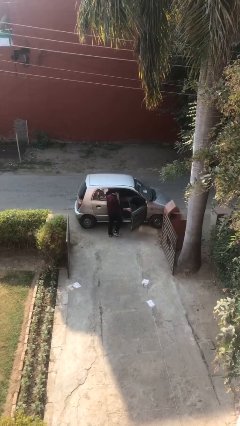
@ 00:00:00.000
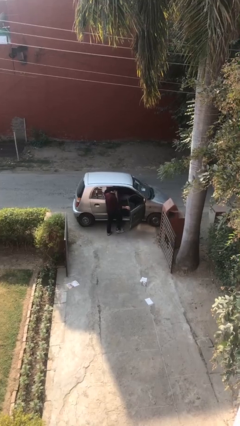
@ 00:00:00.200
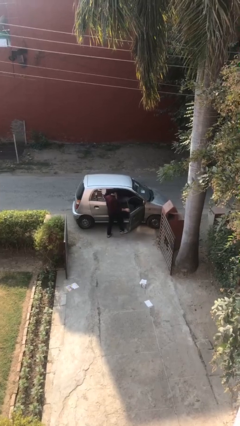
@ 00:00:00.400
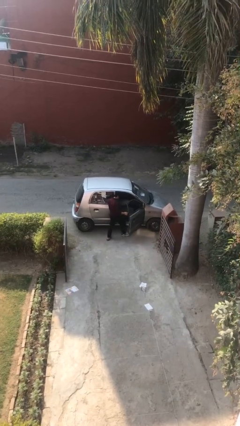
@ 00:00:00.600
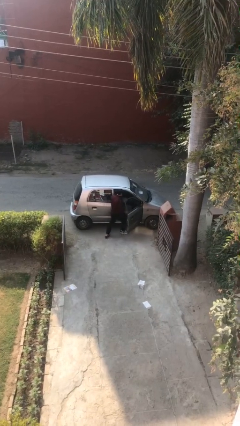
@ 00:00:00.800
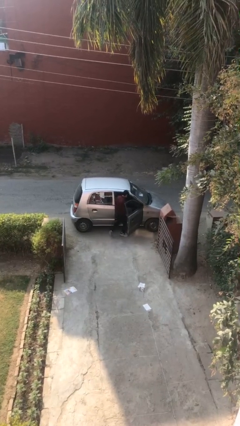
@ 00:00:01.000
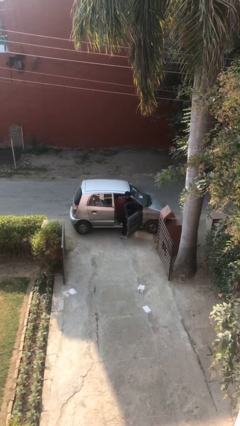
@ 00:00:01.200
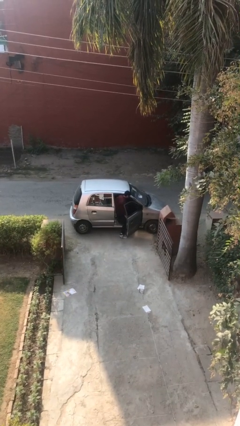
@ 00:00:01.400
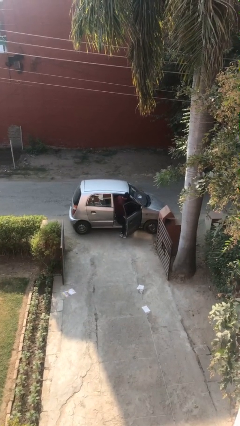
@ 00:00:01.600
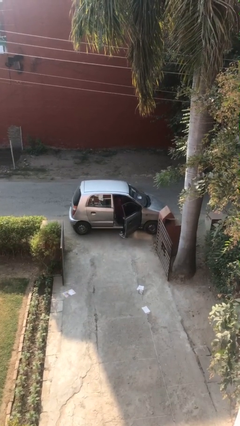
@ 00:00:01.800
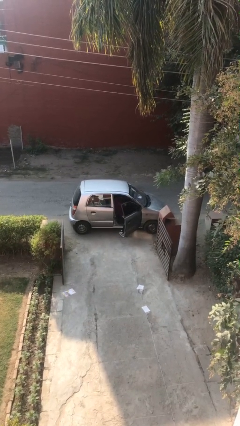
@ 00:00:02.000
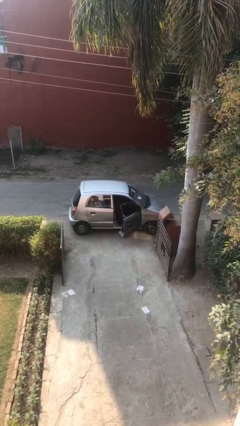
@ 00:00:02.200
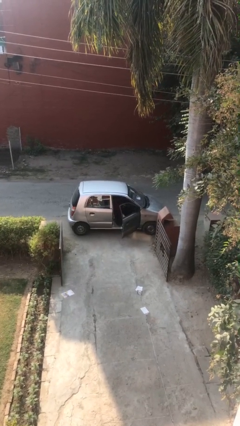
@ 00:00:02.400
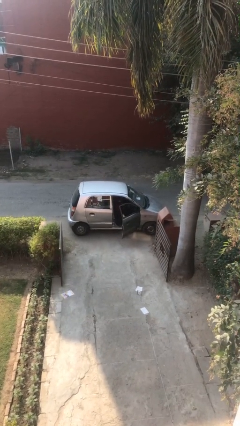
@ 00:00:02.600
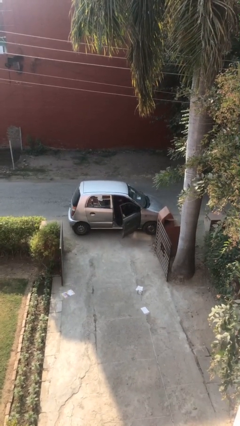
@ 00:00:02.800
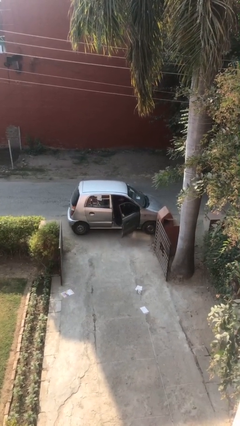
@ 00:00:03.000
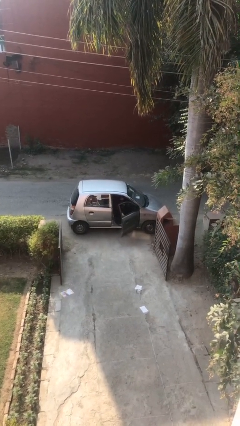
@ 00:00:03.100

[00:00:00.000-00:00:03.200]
person enters car

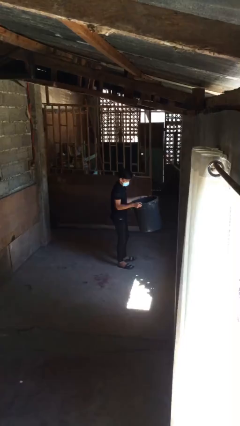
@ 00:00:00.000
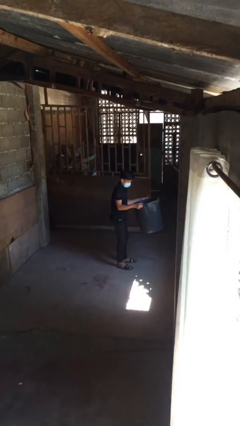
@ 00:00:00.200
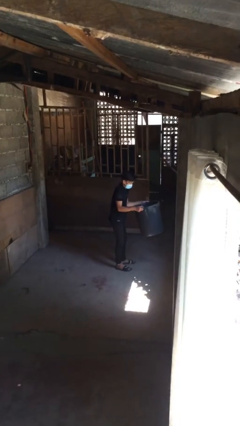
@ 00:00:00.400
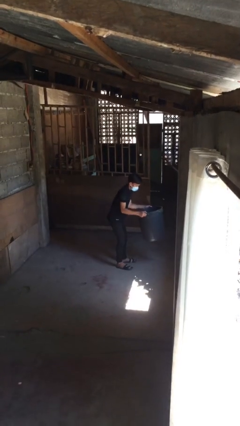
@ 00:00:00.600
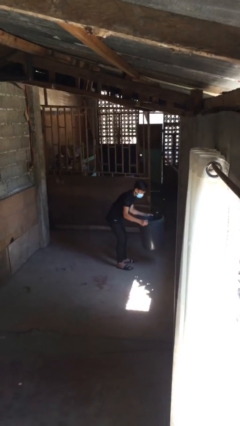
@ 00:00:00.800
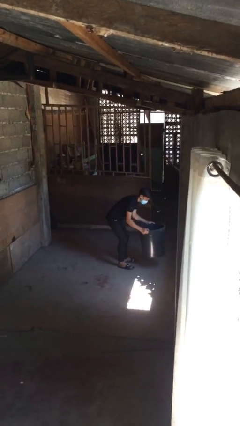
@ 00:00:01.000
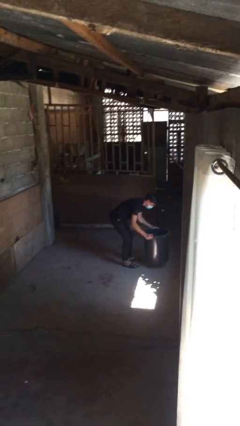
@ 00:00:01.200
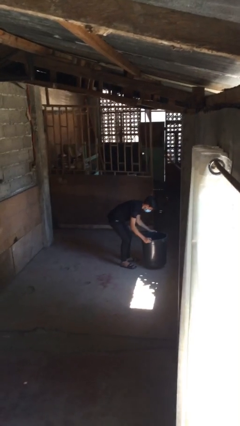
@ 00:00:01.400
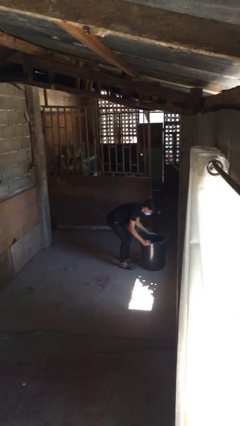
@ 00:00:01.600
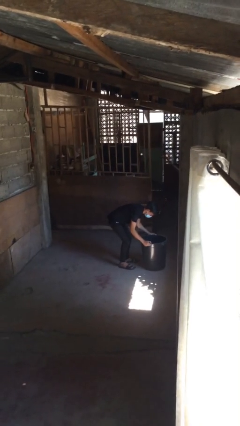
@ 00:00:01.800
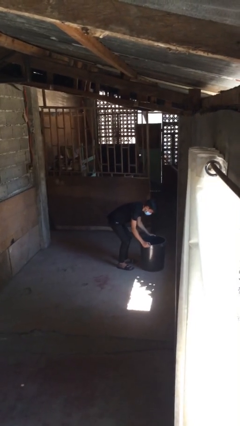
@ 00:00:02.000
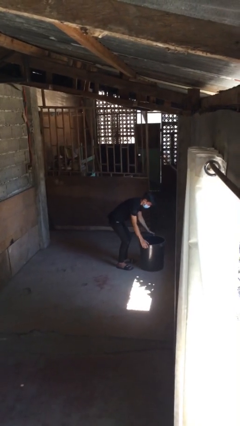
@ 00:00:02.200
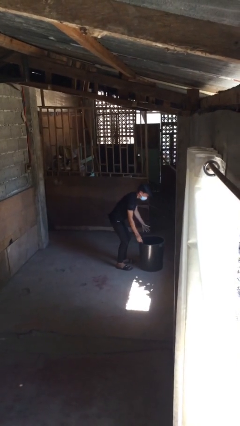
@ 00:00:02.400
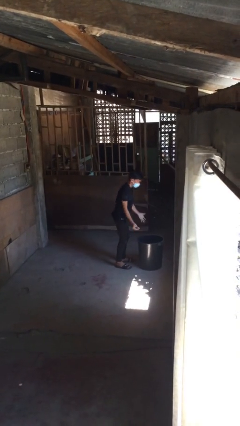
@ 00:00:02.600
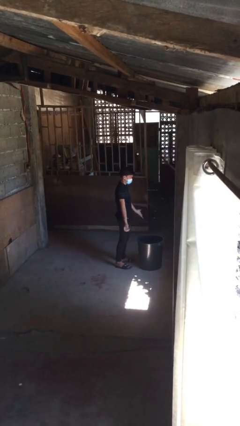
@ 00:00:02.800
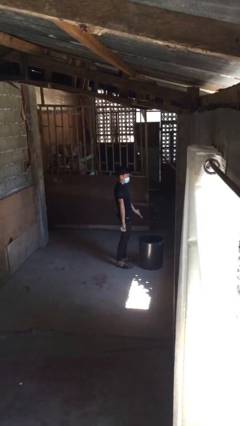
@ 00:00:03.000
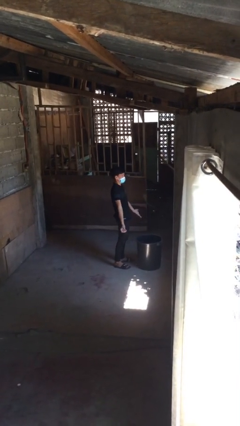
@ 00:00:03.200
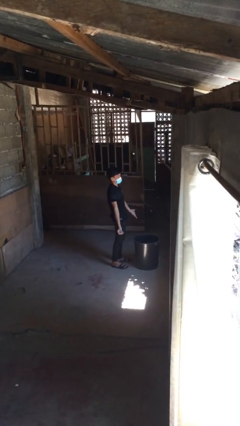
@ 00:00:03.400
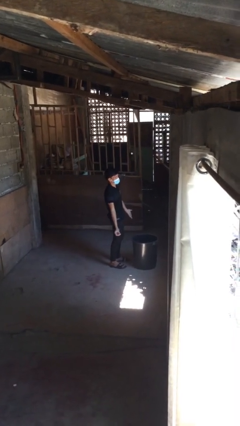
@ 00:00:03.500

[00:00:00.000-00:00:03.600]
person puts down object on floor

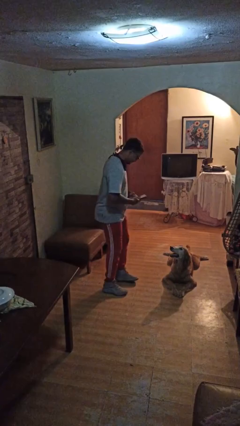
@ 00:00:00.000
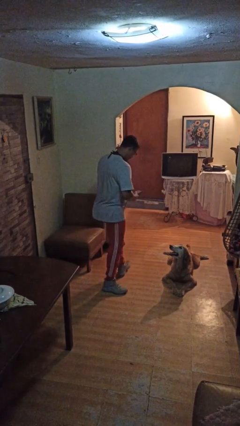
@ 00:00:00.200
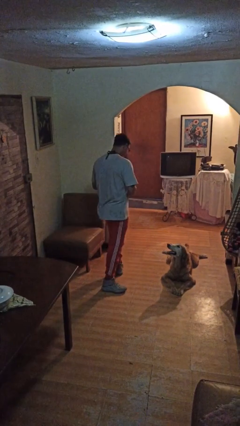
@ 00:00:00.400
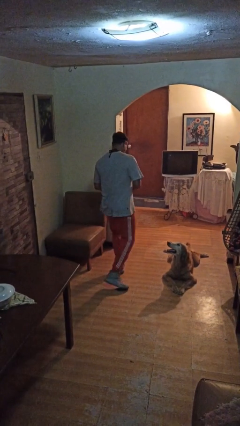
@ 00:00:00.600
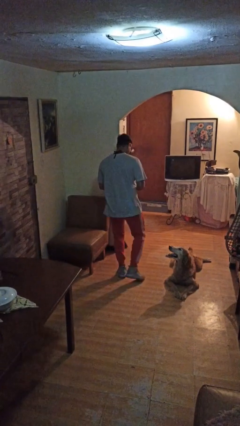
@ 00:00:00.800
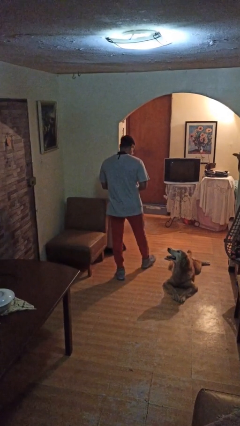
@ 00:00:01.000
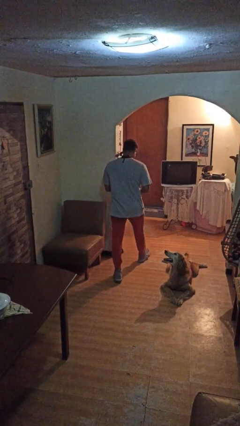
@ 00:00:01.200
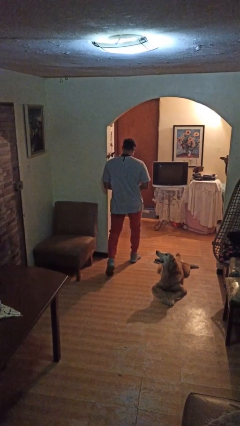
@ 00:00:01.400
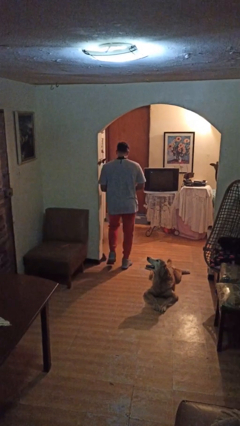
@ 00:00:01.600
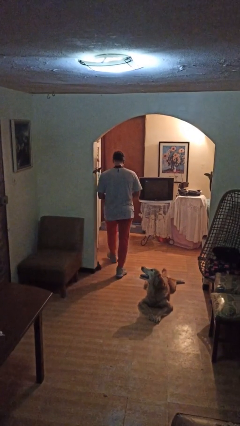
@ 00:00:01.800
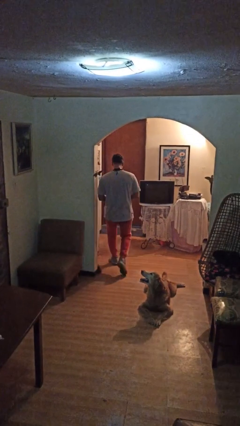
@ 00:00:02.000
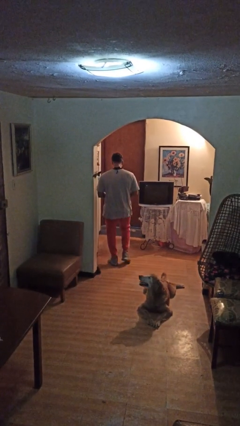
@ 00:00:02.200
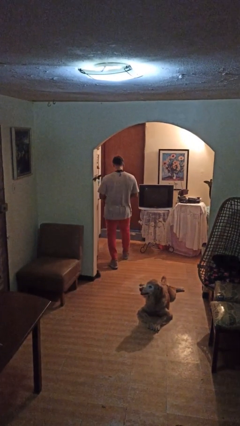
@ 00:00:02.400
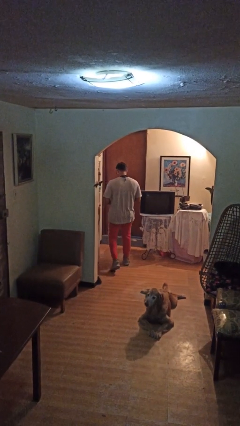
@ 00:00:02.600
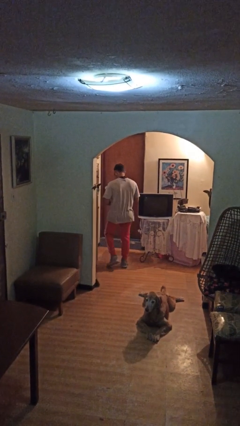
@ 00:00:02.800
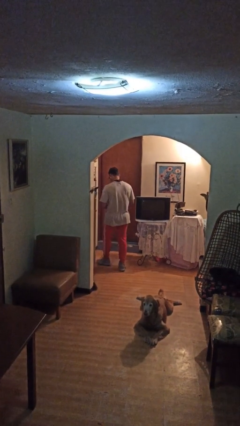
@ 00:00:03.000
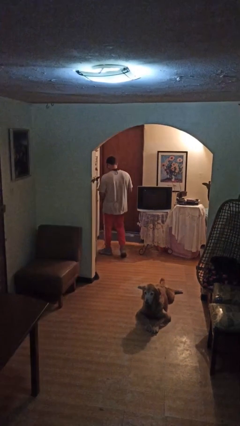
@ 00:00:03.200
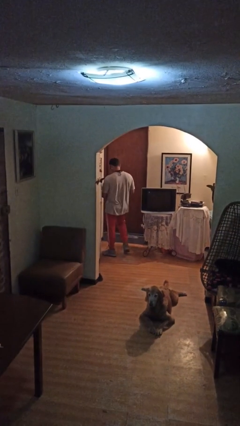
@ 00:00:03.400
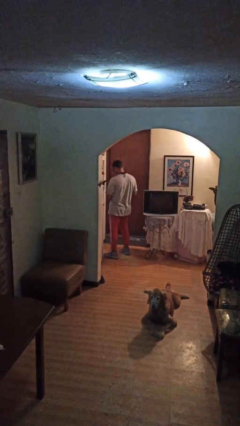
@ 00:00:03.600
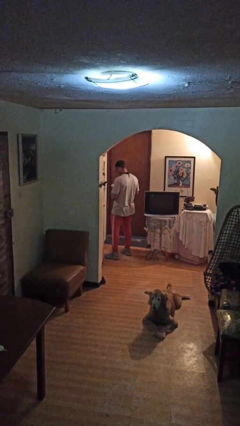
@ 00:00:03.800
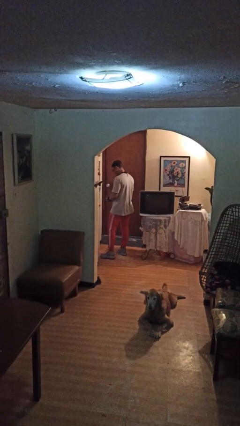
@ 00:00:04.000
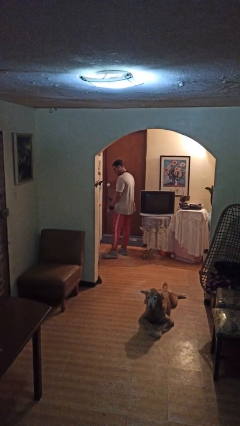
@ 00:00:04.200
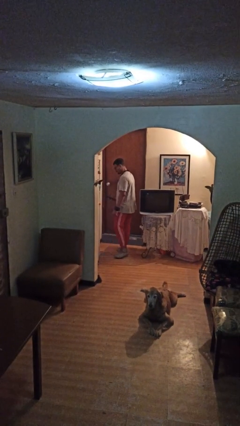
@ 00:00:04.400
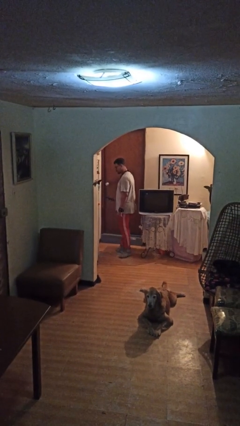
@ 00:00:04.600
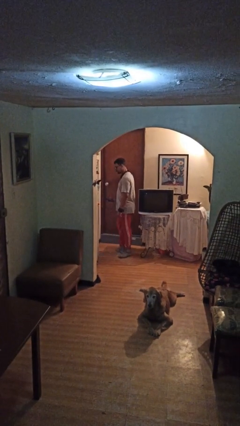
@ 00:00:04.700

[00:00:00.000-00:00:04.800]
person exits scene through structure

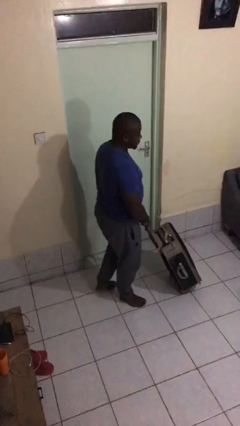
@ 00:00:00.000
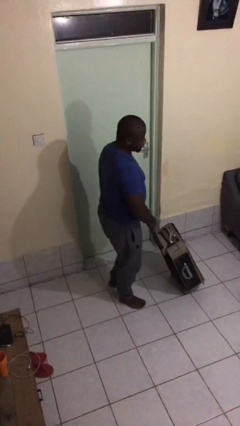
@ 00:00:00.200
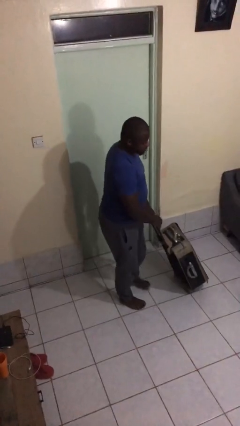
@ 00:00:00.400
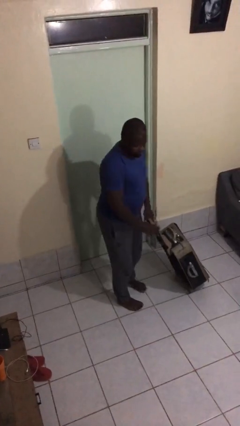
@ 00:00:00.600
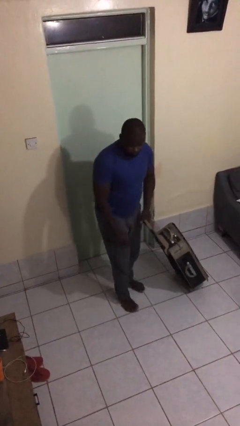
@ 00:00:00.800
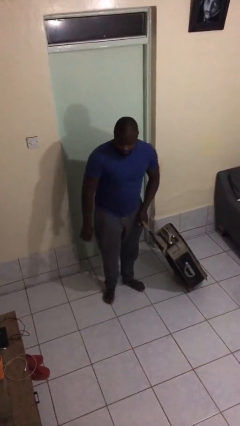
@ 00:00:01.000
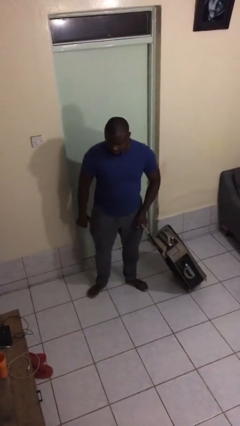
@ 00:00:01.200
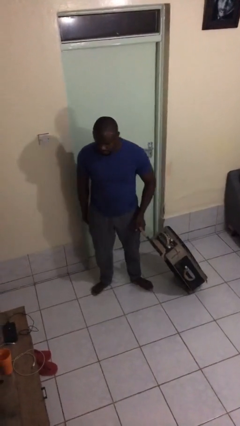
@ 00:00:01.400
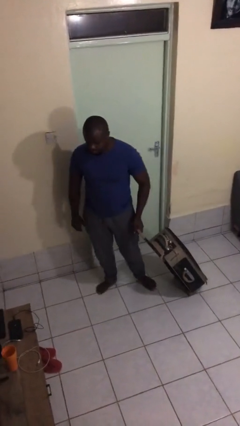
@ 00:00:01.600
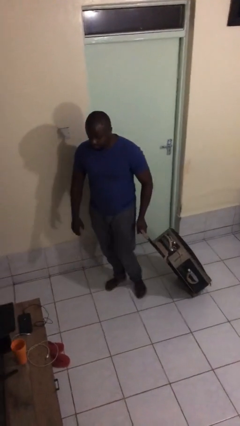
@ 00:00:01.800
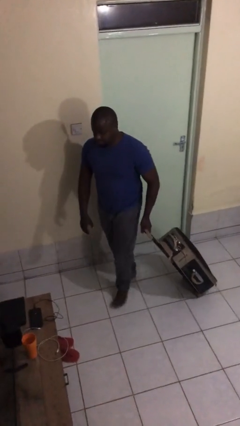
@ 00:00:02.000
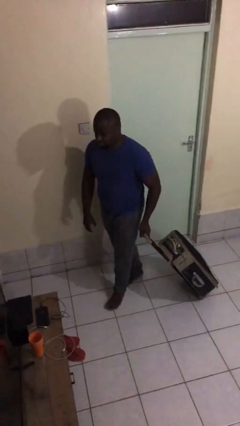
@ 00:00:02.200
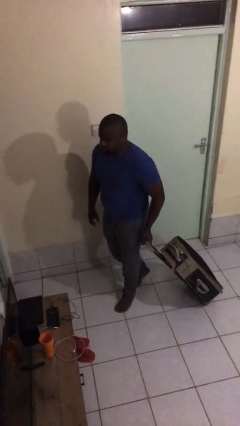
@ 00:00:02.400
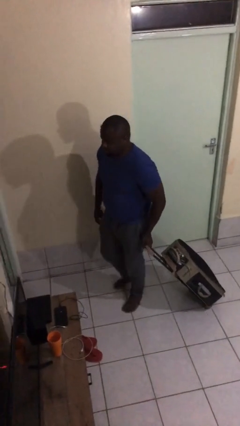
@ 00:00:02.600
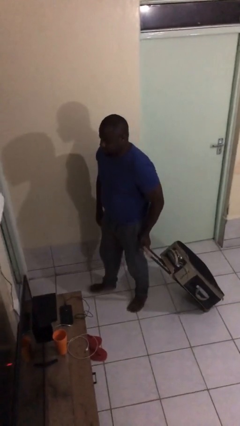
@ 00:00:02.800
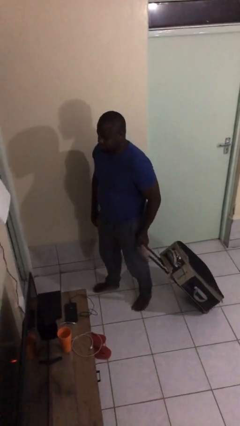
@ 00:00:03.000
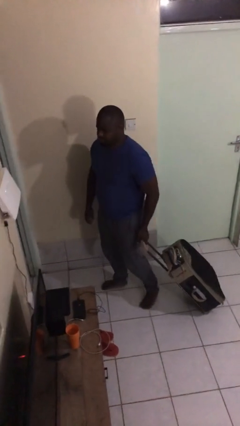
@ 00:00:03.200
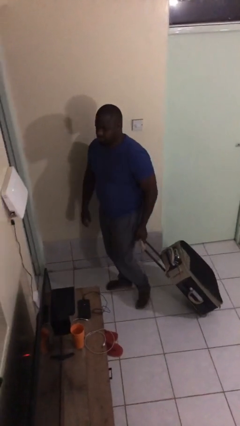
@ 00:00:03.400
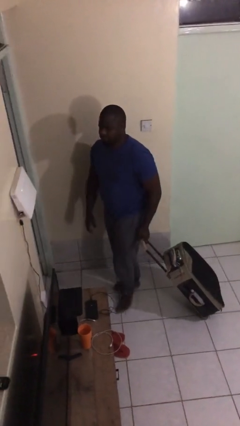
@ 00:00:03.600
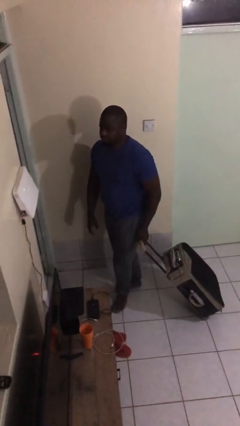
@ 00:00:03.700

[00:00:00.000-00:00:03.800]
person pulls wheeled cart

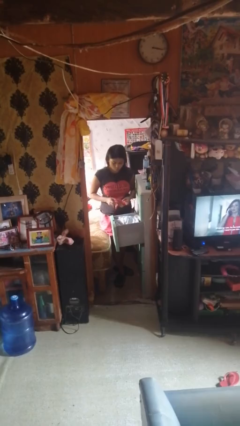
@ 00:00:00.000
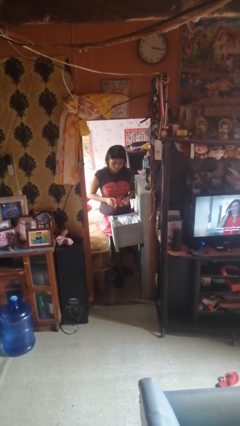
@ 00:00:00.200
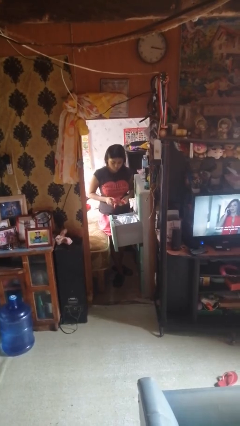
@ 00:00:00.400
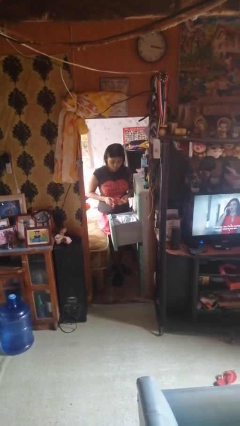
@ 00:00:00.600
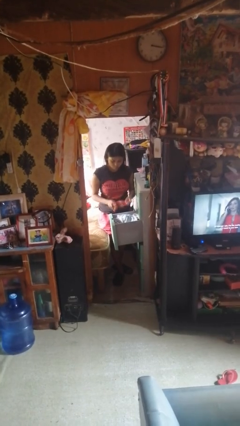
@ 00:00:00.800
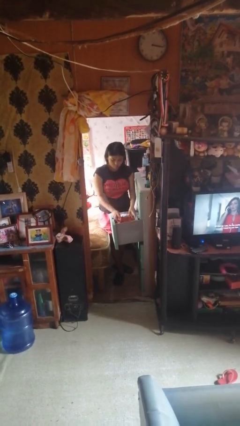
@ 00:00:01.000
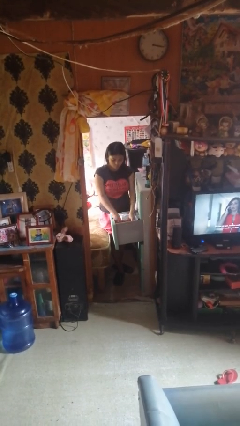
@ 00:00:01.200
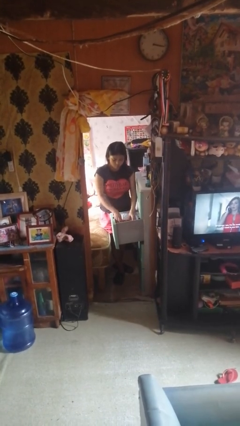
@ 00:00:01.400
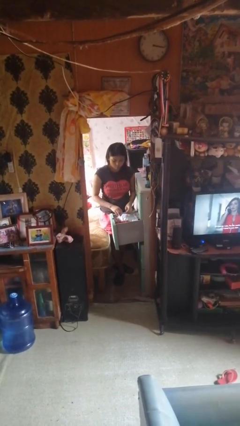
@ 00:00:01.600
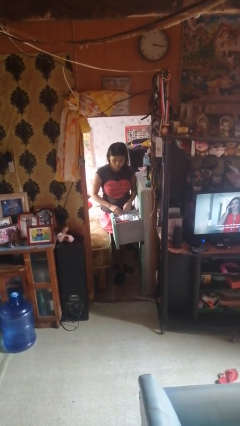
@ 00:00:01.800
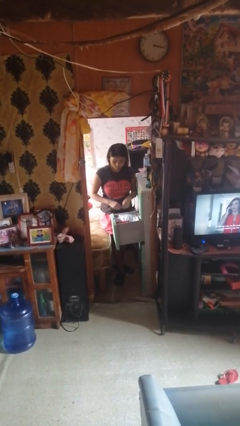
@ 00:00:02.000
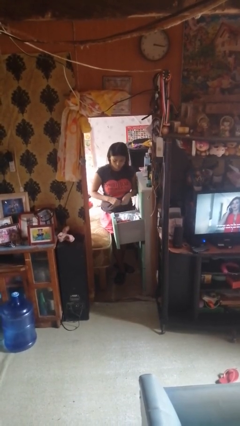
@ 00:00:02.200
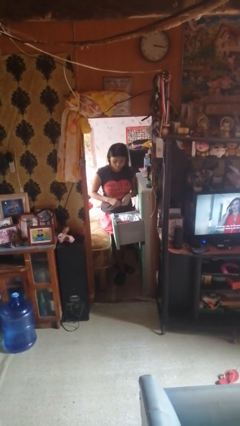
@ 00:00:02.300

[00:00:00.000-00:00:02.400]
person puts clothes into dresser
